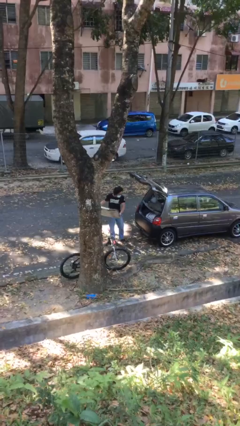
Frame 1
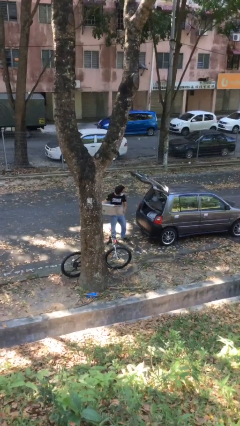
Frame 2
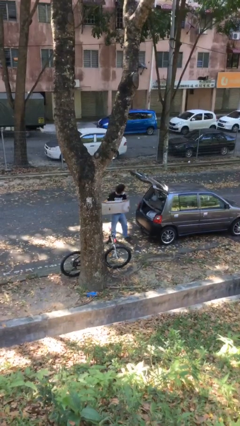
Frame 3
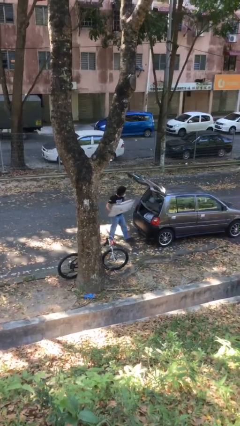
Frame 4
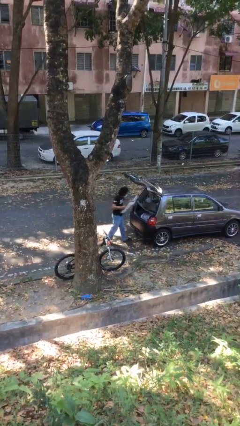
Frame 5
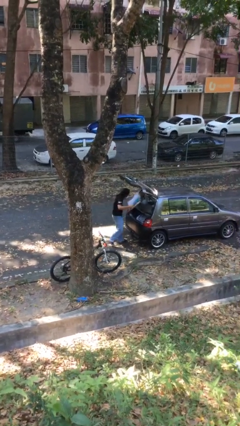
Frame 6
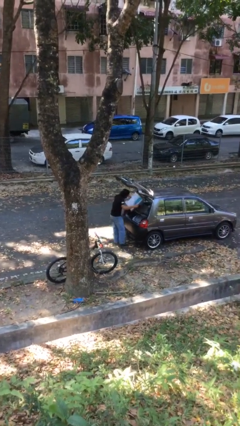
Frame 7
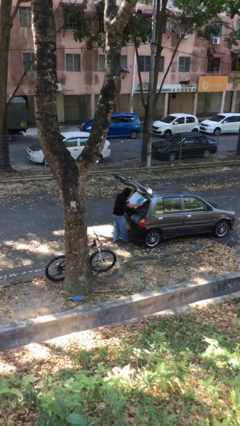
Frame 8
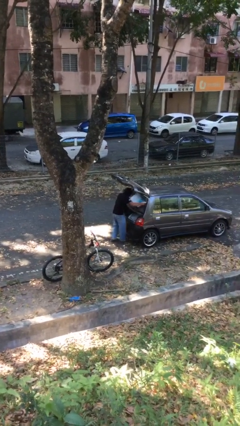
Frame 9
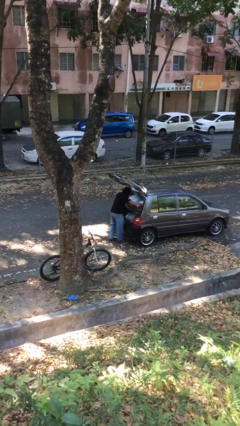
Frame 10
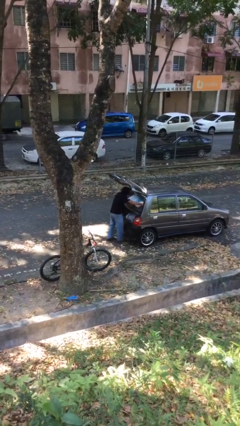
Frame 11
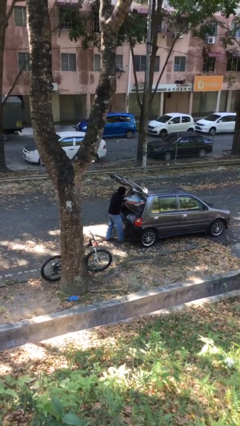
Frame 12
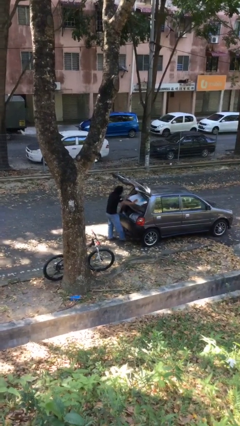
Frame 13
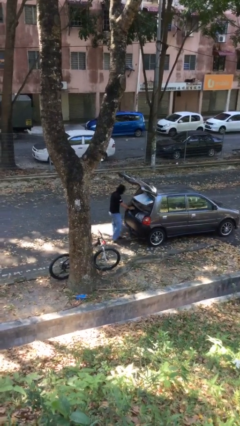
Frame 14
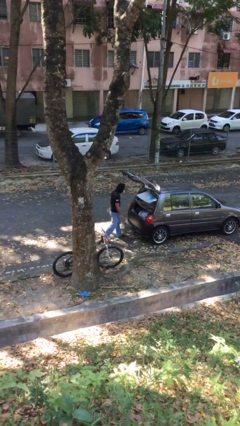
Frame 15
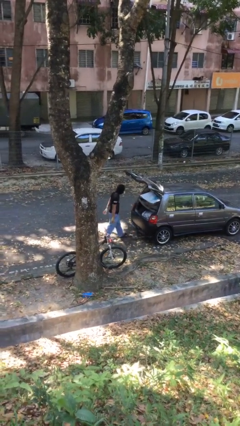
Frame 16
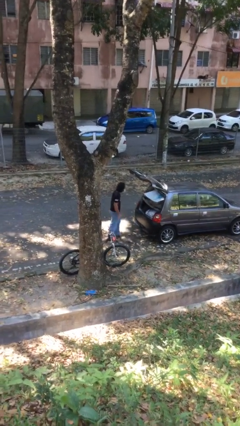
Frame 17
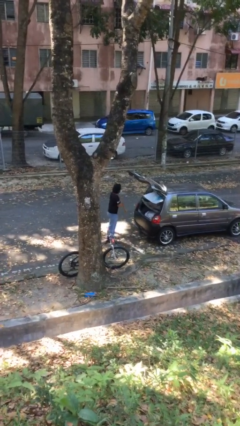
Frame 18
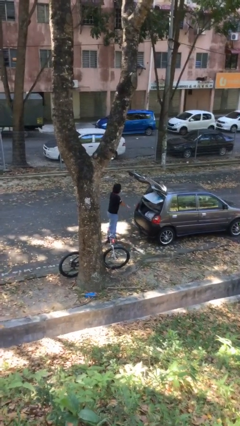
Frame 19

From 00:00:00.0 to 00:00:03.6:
person loads car

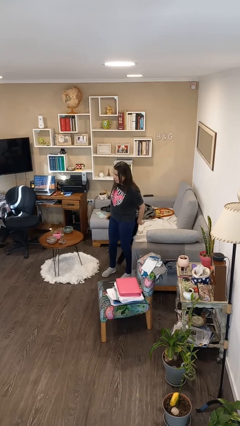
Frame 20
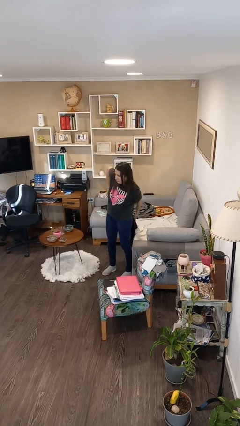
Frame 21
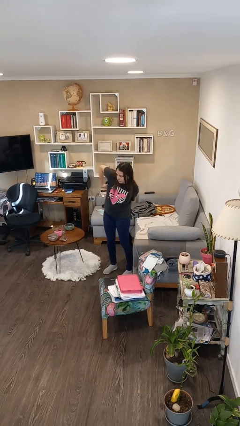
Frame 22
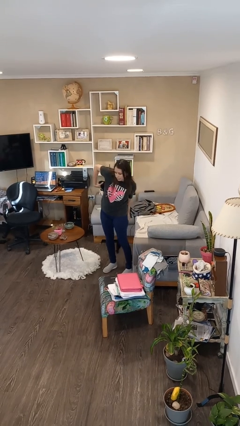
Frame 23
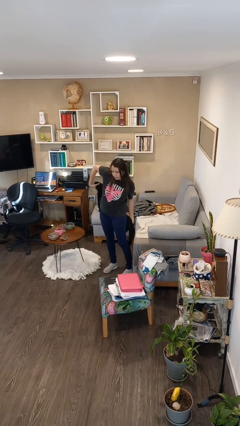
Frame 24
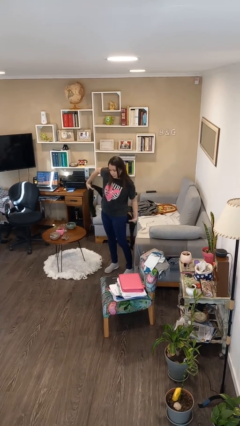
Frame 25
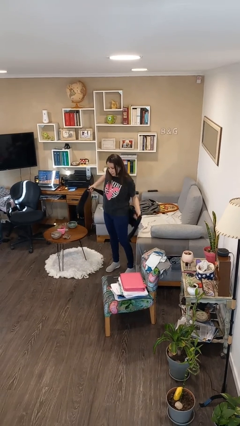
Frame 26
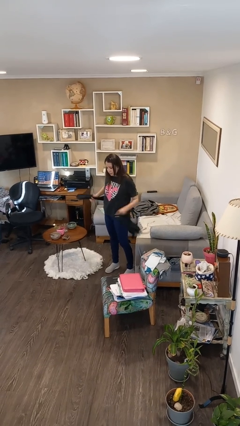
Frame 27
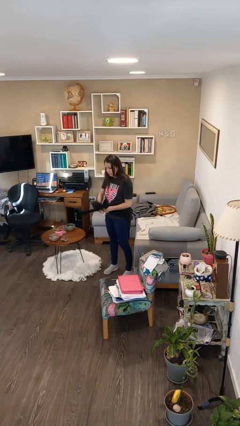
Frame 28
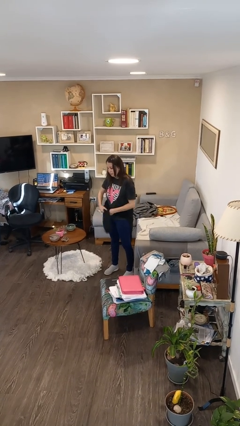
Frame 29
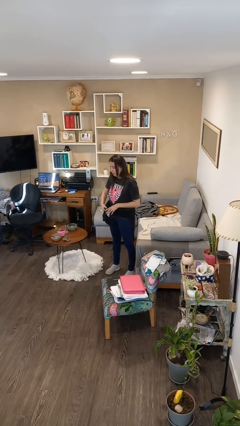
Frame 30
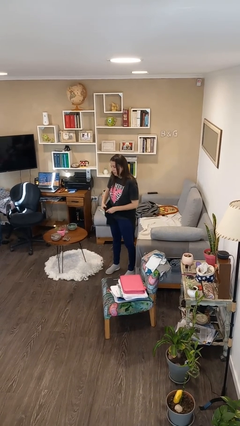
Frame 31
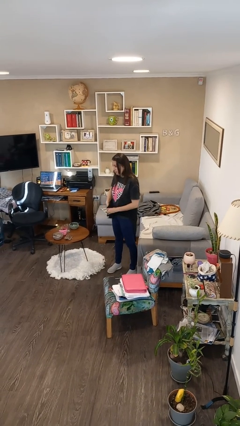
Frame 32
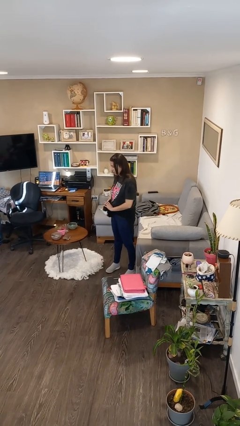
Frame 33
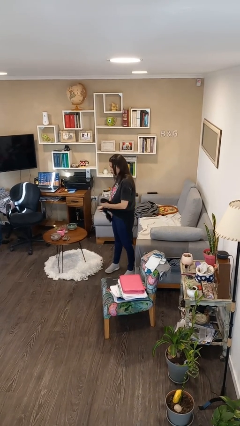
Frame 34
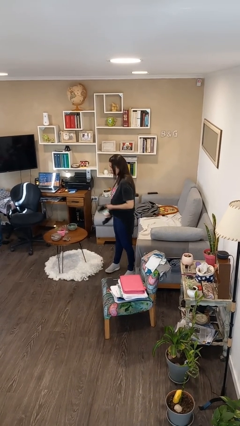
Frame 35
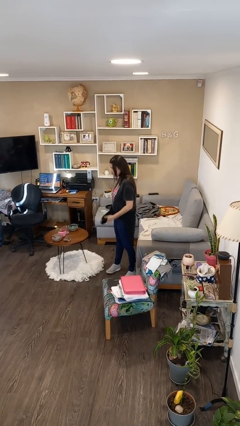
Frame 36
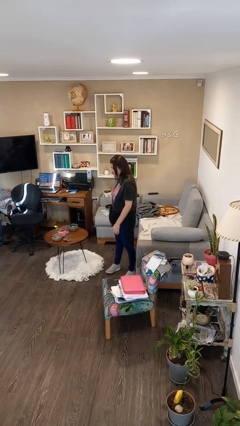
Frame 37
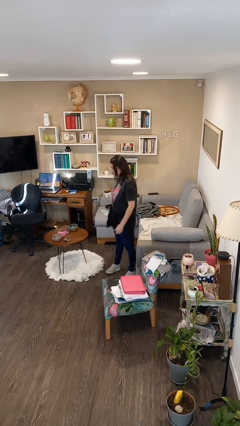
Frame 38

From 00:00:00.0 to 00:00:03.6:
person ties jacket around waist

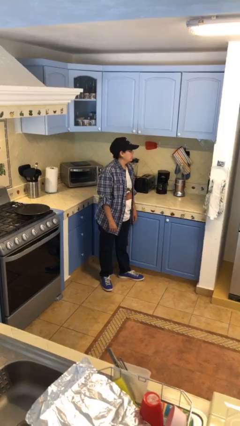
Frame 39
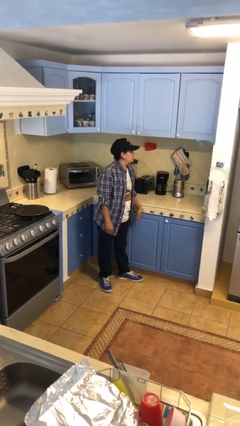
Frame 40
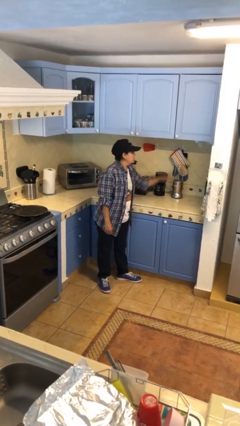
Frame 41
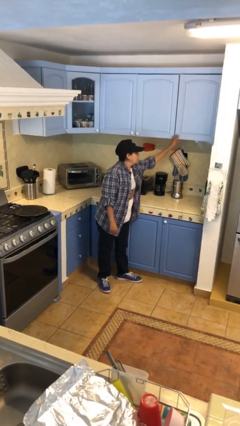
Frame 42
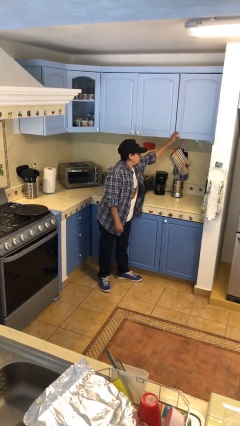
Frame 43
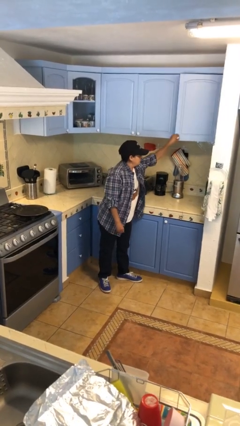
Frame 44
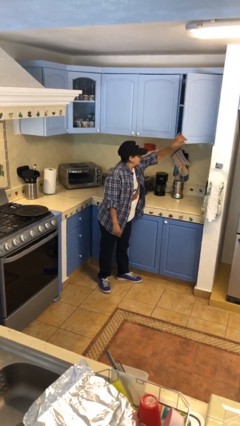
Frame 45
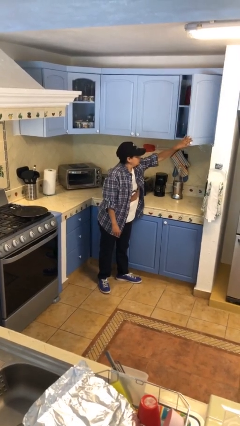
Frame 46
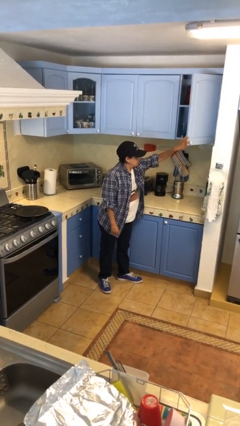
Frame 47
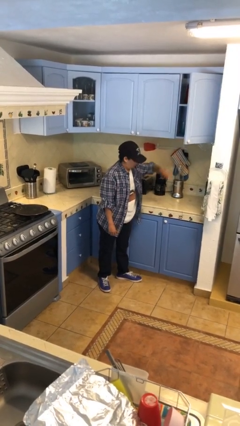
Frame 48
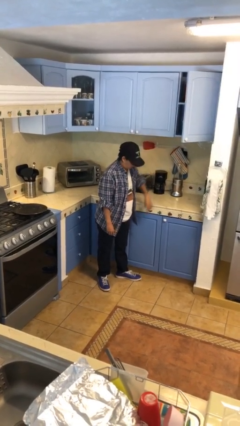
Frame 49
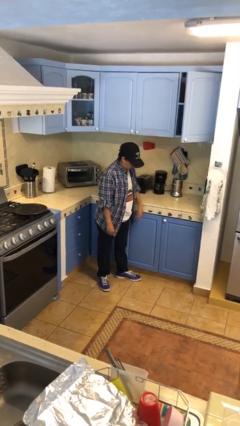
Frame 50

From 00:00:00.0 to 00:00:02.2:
person opens cabinet

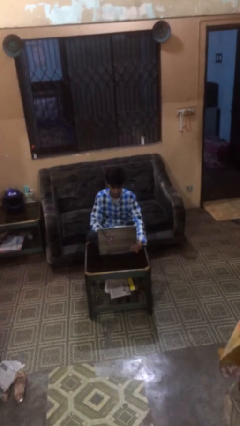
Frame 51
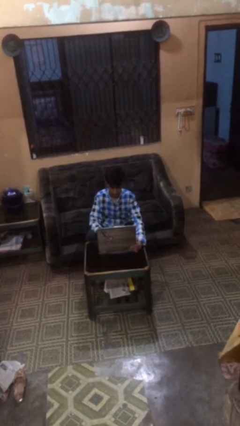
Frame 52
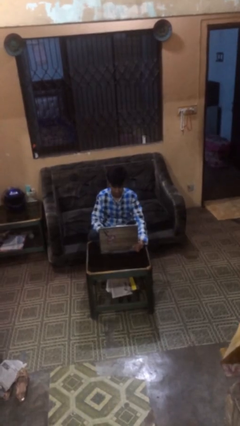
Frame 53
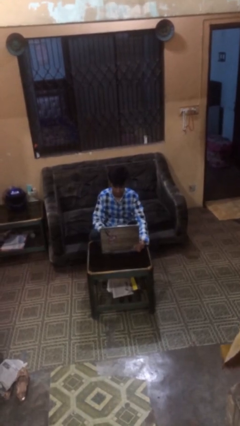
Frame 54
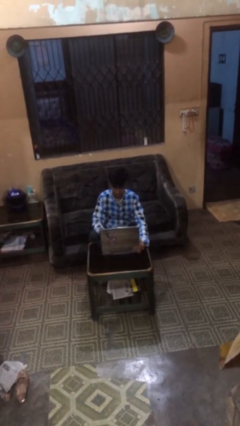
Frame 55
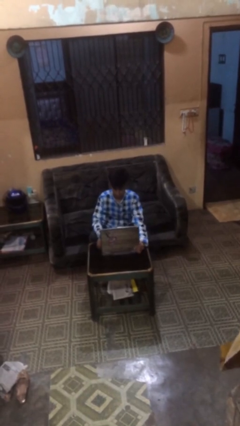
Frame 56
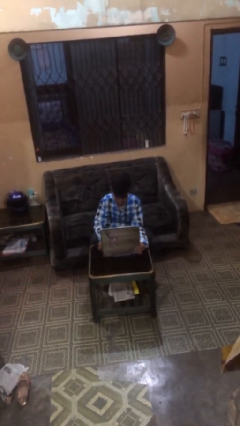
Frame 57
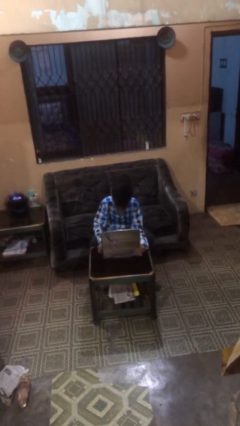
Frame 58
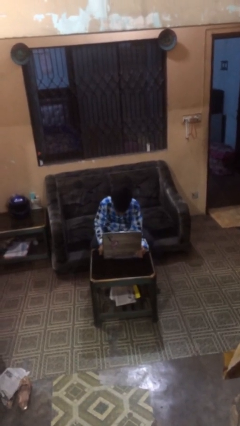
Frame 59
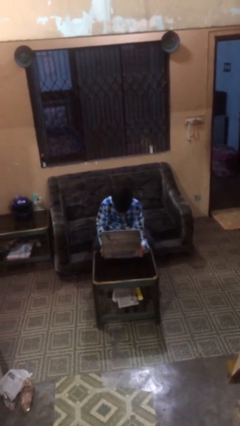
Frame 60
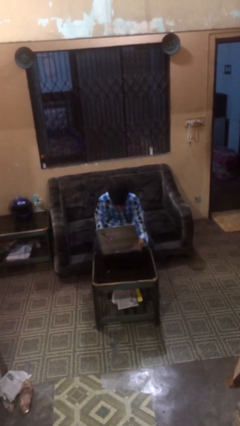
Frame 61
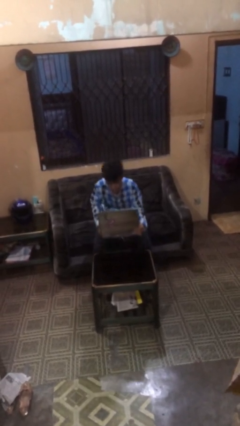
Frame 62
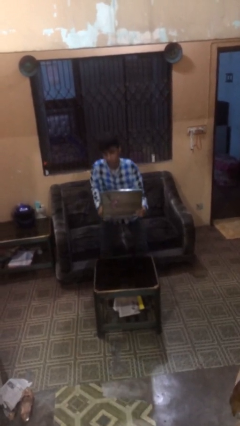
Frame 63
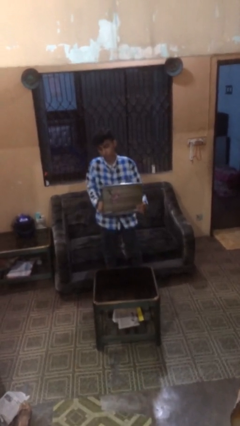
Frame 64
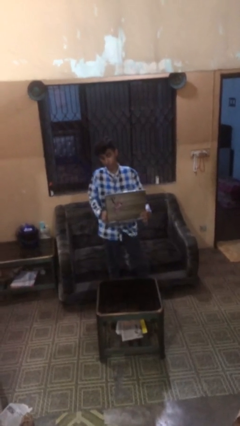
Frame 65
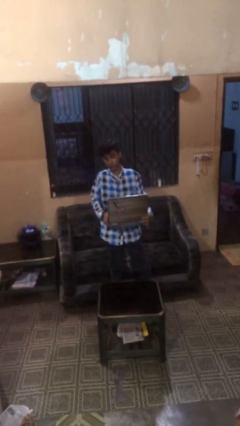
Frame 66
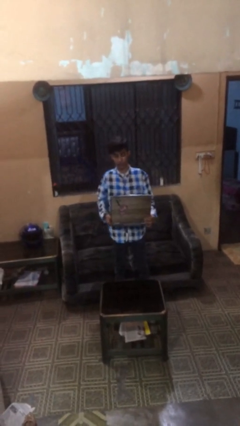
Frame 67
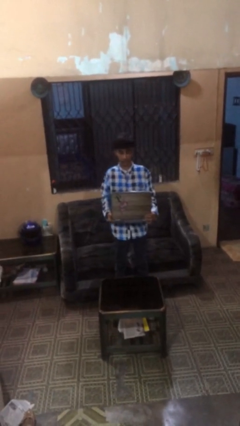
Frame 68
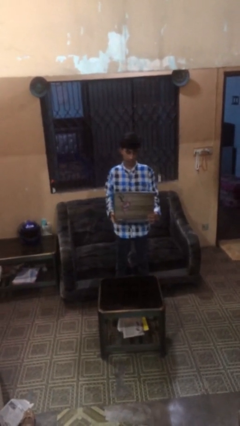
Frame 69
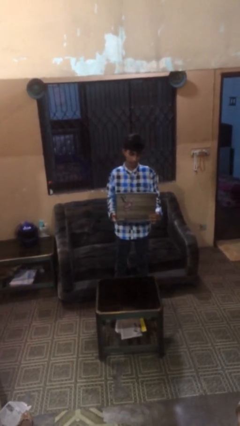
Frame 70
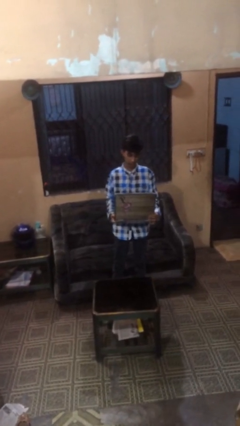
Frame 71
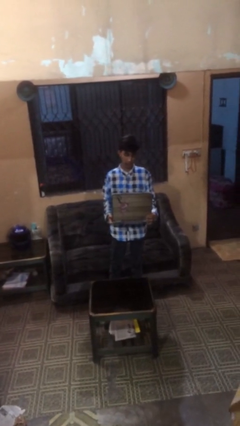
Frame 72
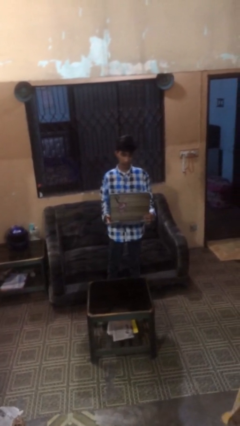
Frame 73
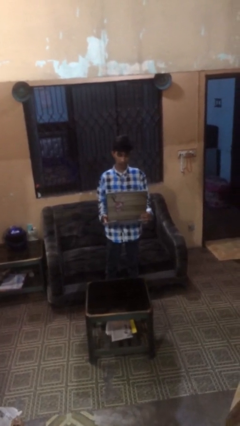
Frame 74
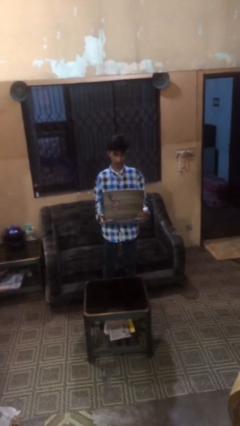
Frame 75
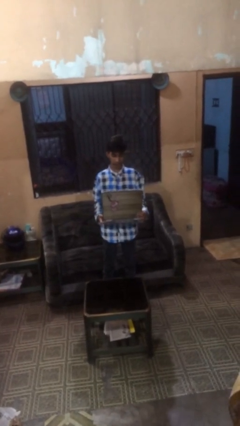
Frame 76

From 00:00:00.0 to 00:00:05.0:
person stands up

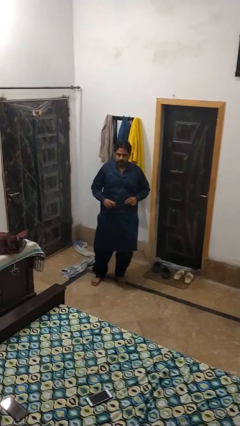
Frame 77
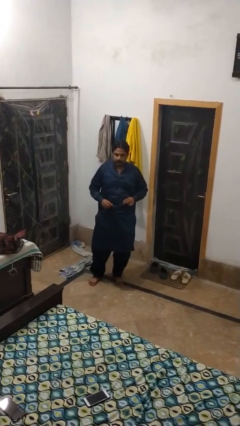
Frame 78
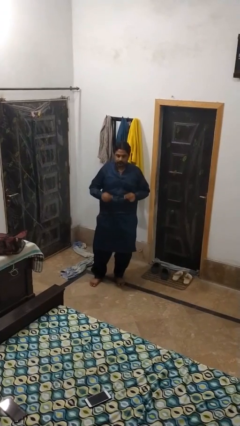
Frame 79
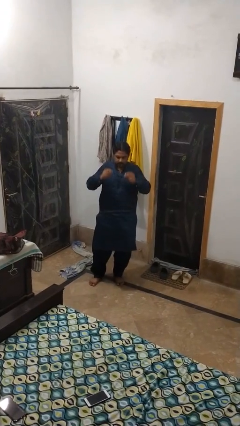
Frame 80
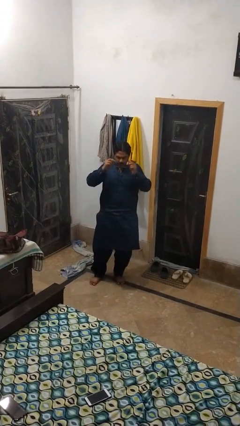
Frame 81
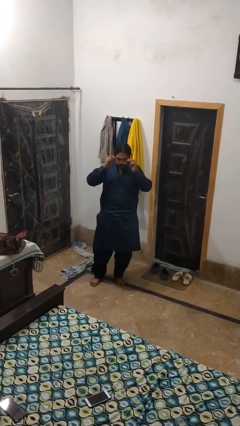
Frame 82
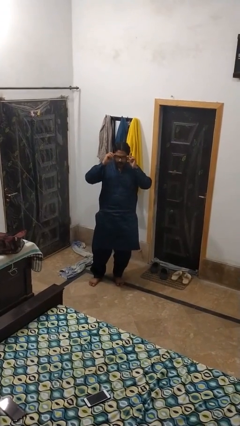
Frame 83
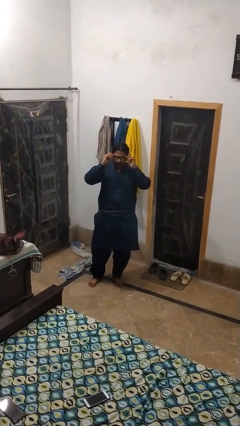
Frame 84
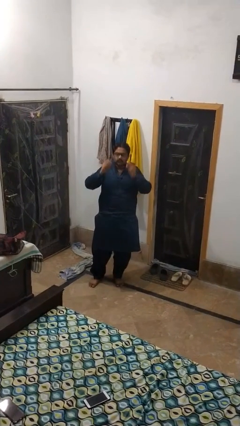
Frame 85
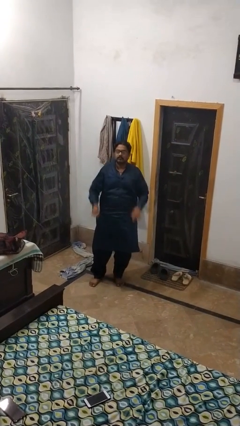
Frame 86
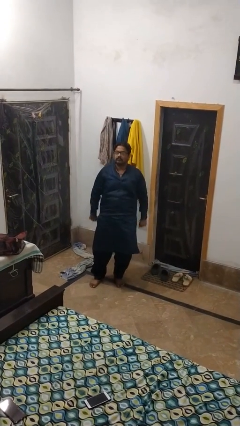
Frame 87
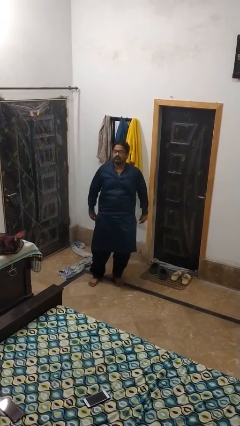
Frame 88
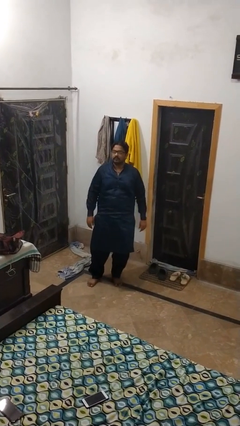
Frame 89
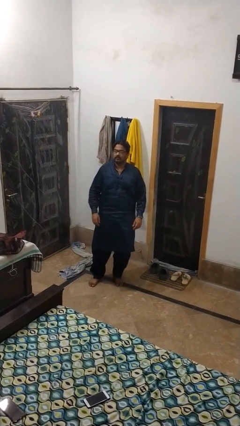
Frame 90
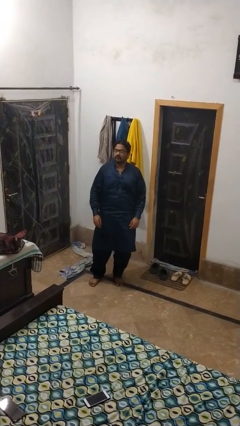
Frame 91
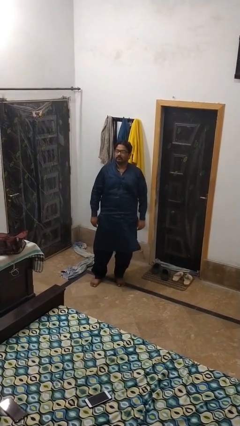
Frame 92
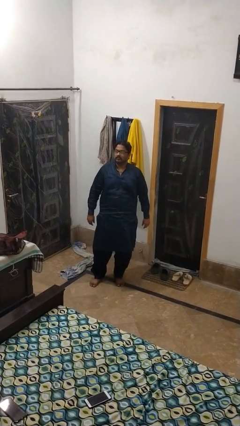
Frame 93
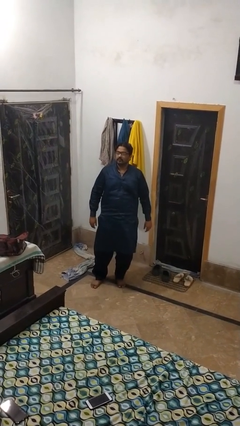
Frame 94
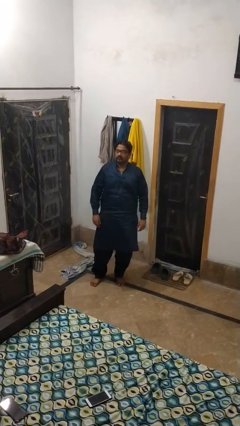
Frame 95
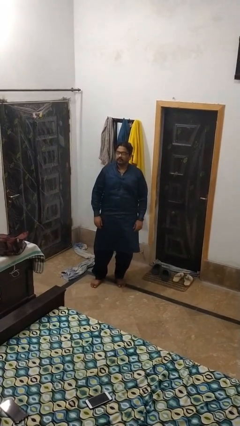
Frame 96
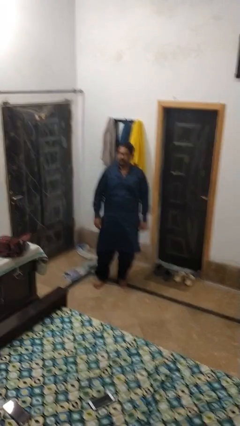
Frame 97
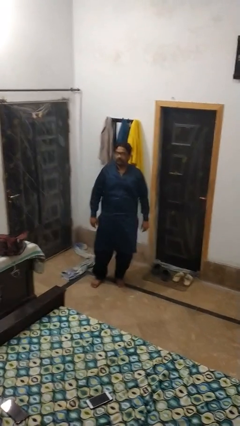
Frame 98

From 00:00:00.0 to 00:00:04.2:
person puts on glasses
